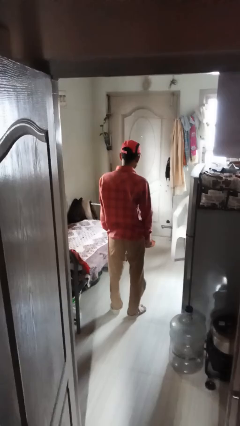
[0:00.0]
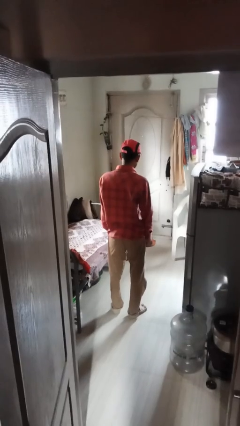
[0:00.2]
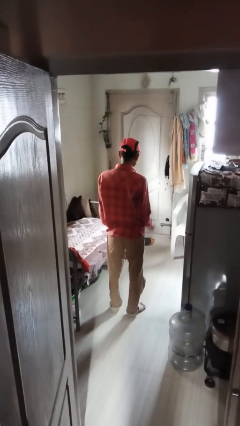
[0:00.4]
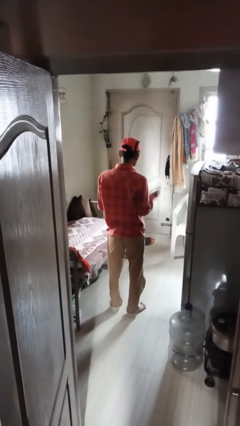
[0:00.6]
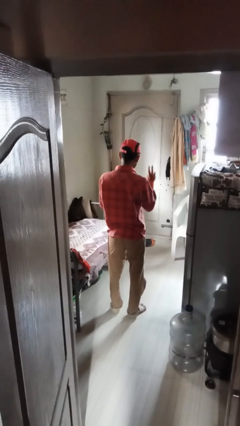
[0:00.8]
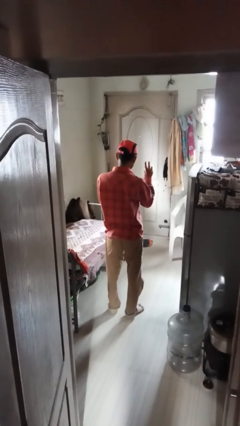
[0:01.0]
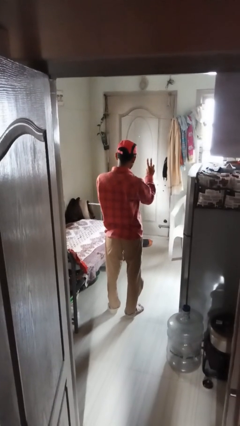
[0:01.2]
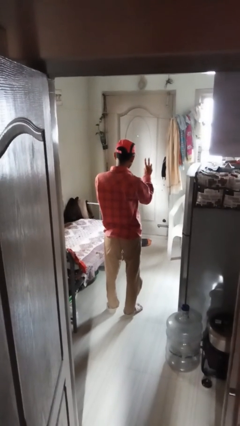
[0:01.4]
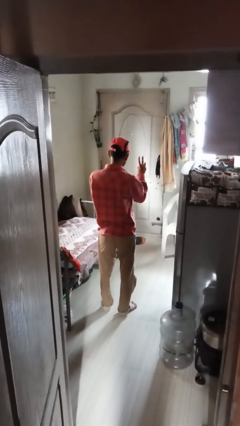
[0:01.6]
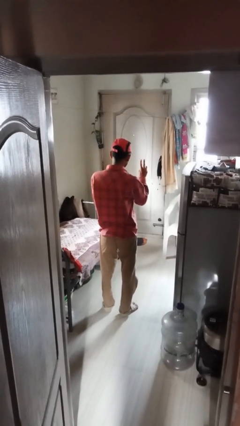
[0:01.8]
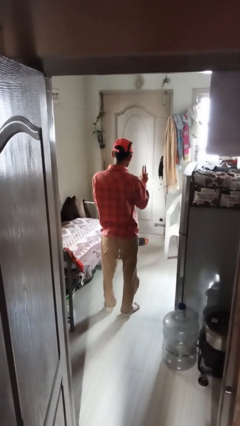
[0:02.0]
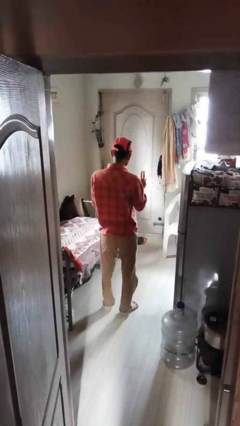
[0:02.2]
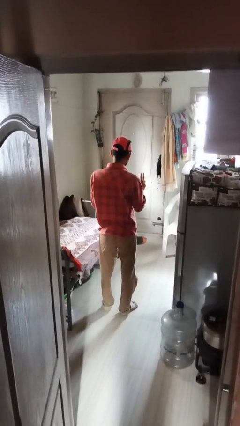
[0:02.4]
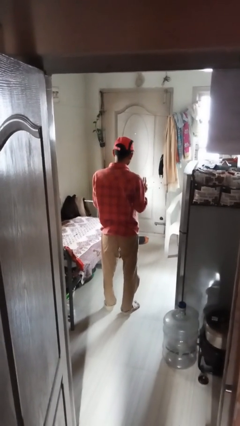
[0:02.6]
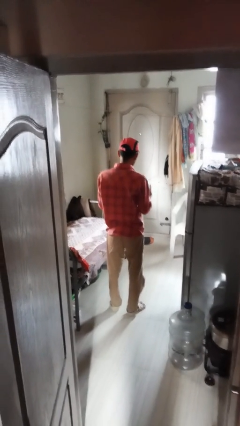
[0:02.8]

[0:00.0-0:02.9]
person gestures peace

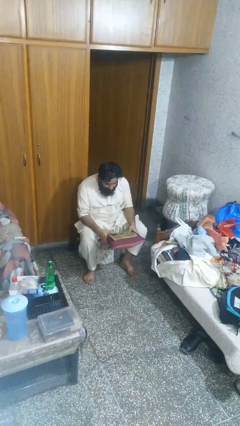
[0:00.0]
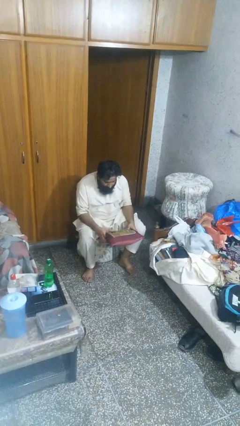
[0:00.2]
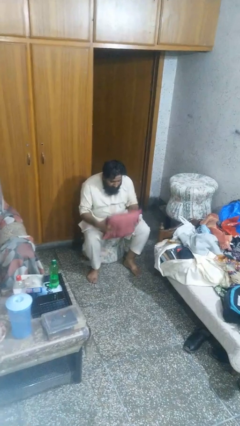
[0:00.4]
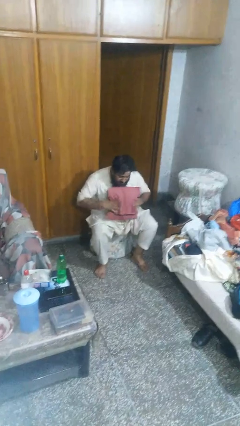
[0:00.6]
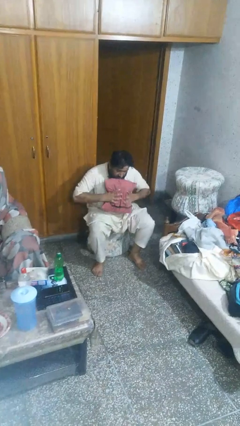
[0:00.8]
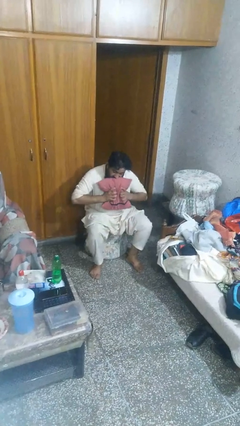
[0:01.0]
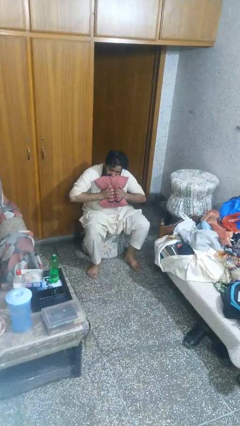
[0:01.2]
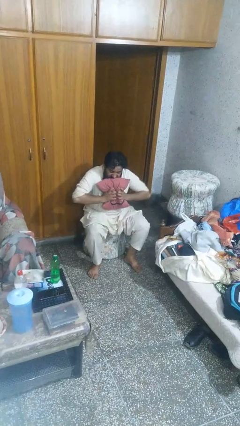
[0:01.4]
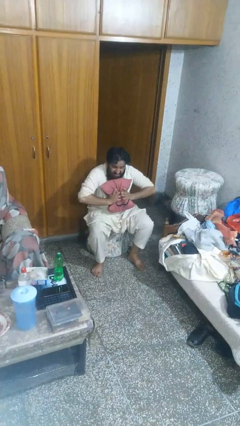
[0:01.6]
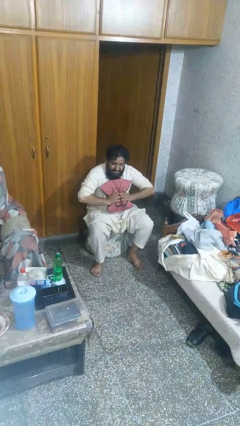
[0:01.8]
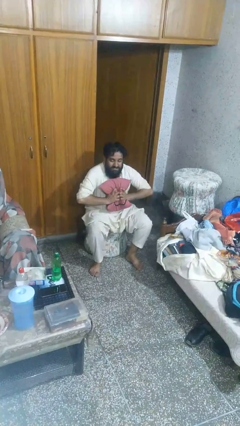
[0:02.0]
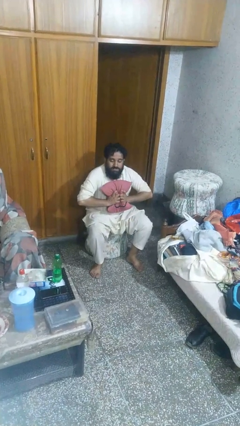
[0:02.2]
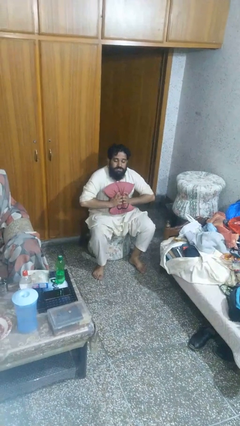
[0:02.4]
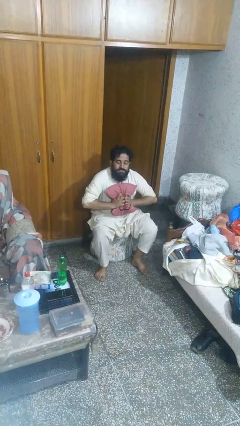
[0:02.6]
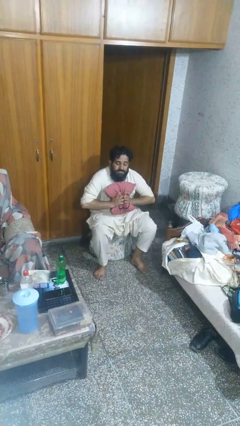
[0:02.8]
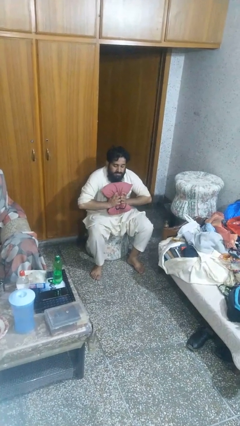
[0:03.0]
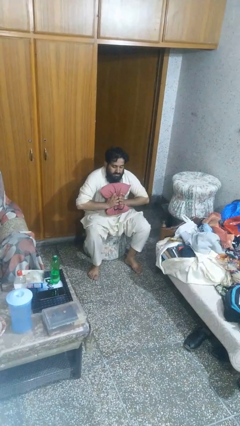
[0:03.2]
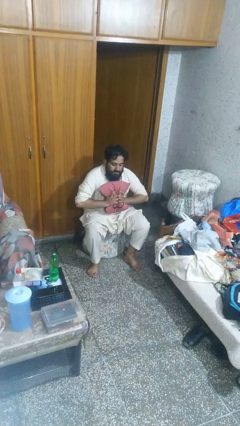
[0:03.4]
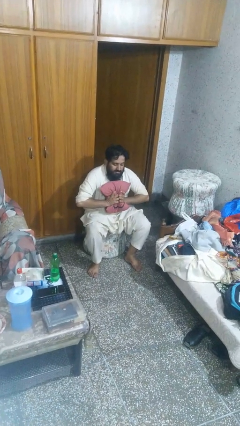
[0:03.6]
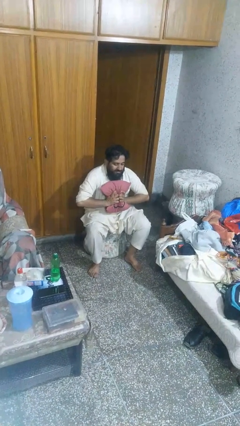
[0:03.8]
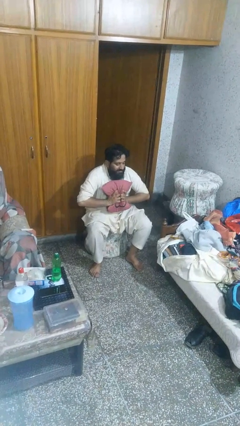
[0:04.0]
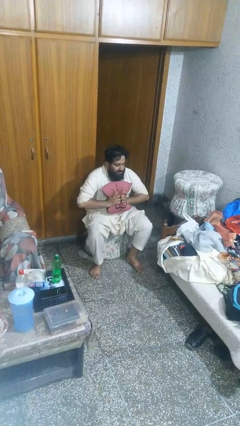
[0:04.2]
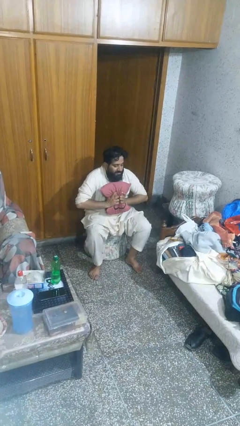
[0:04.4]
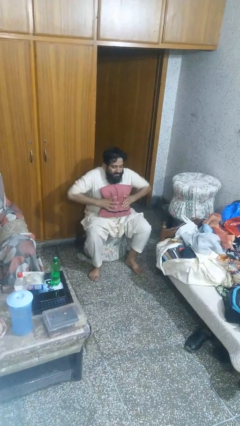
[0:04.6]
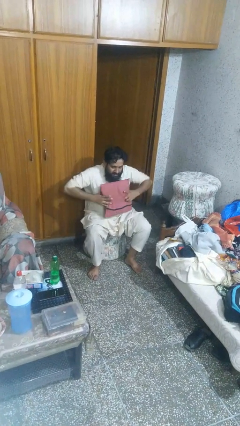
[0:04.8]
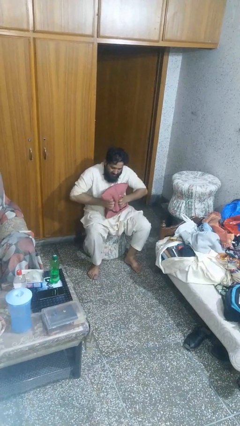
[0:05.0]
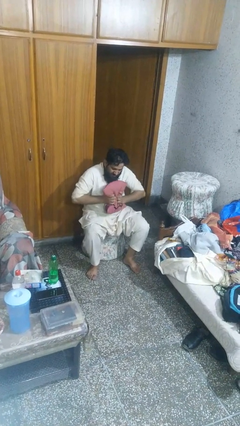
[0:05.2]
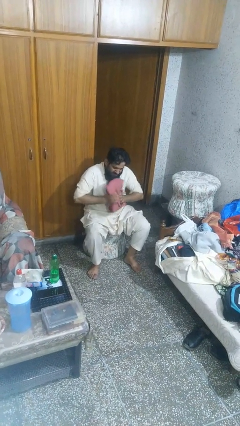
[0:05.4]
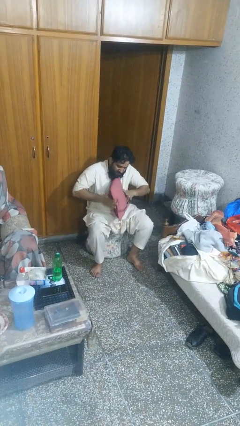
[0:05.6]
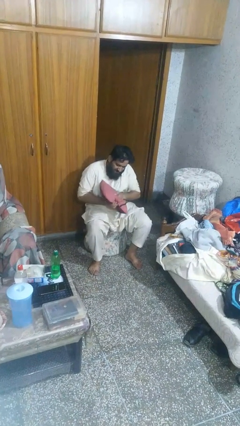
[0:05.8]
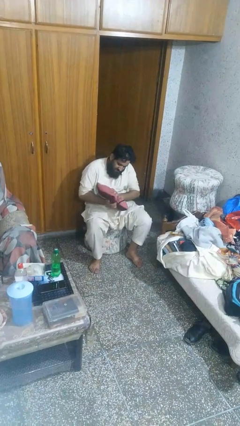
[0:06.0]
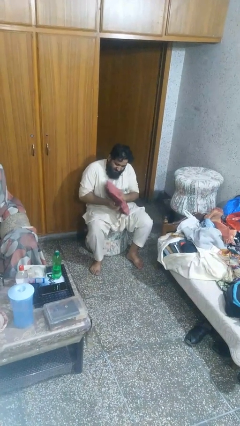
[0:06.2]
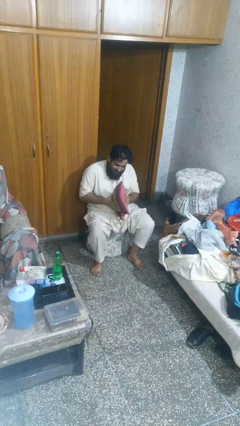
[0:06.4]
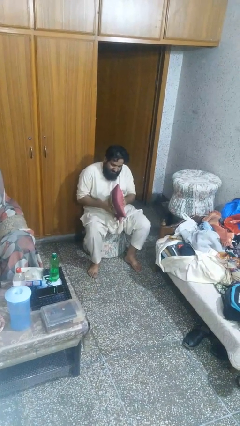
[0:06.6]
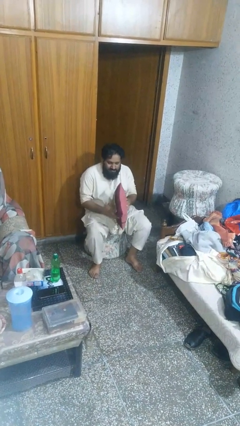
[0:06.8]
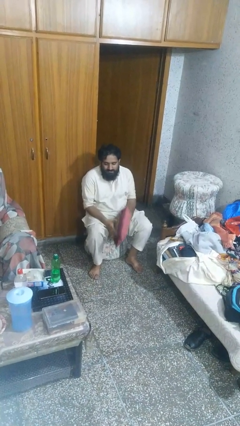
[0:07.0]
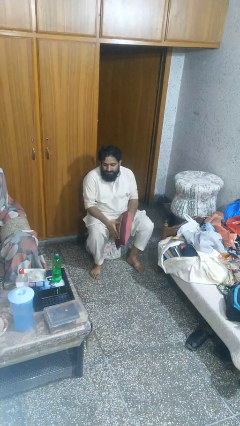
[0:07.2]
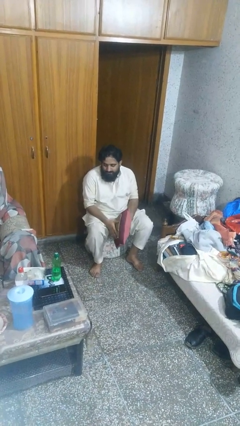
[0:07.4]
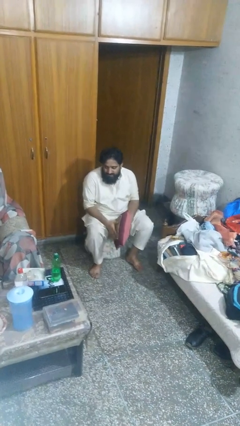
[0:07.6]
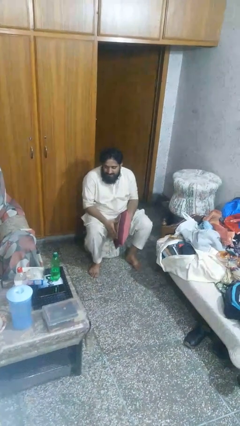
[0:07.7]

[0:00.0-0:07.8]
person squeezes object

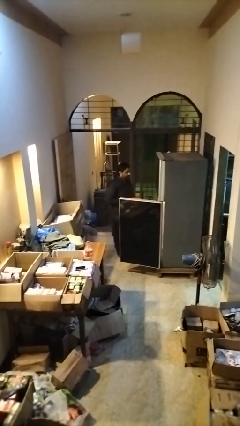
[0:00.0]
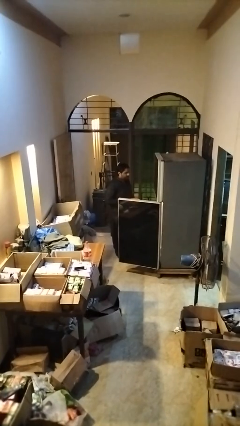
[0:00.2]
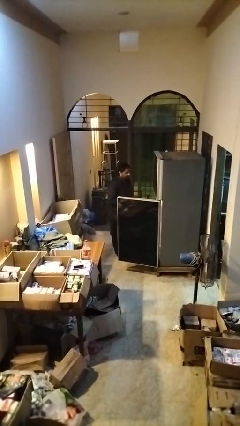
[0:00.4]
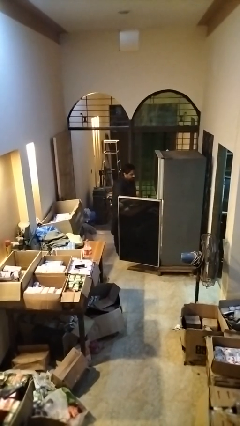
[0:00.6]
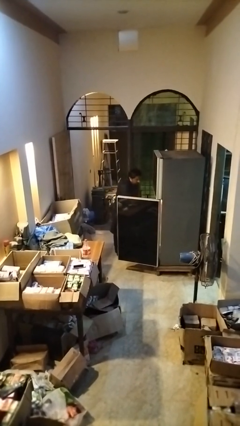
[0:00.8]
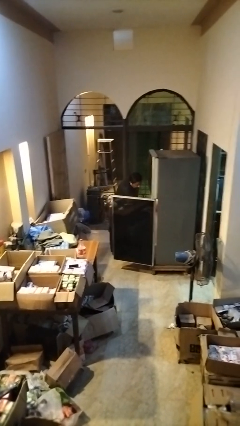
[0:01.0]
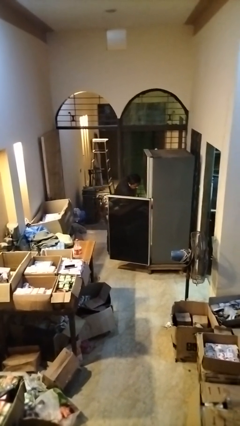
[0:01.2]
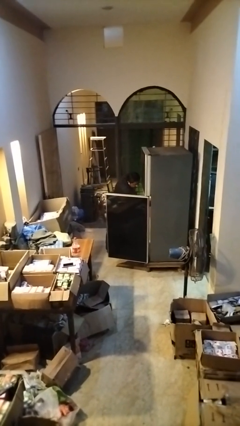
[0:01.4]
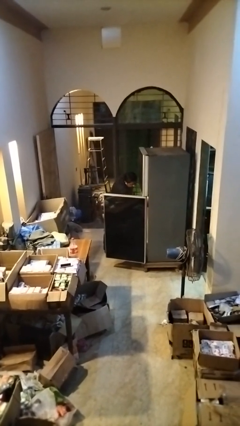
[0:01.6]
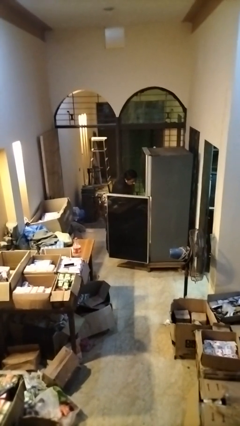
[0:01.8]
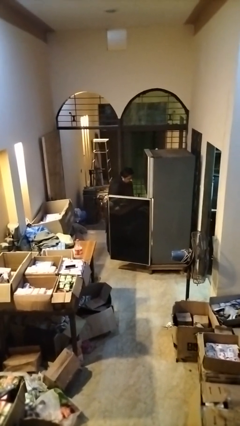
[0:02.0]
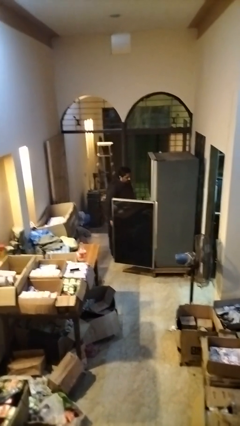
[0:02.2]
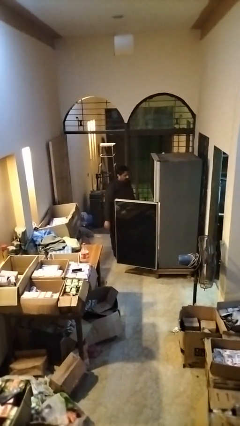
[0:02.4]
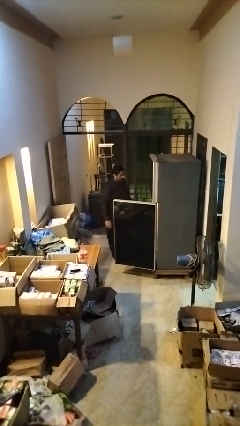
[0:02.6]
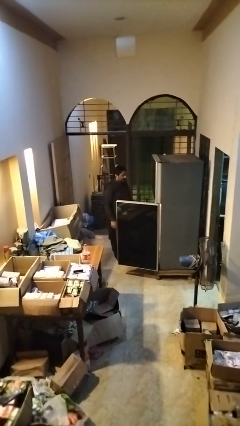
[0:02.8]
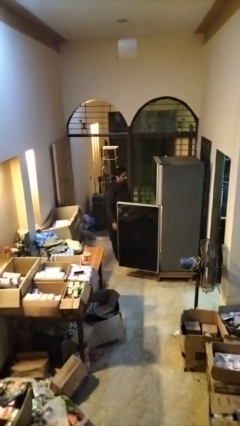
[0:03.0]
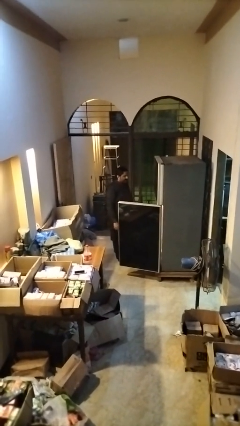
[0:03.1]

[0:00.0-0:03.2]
person takes object from refrigerator

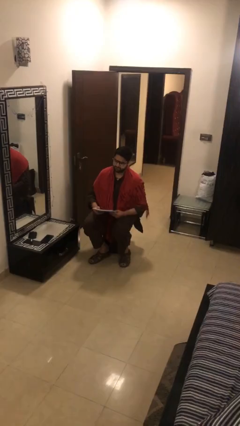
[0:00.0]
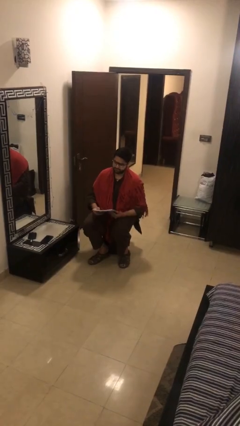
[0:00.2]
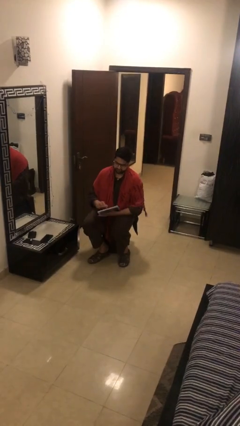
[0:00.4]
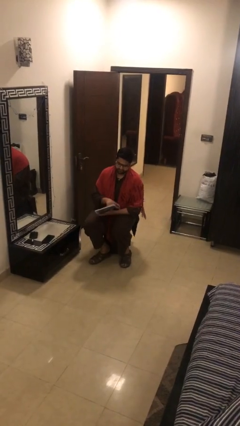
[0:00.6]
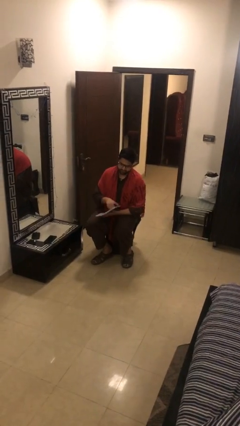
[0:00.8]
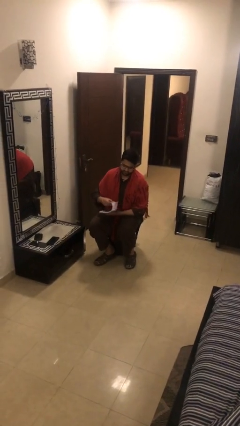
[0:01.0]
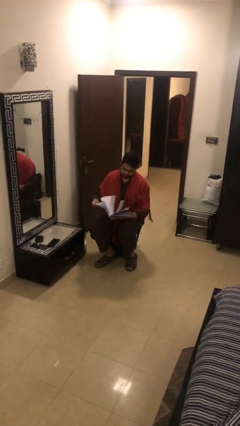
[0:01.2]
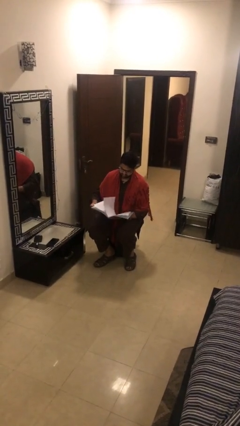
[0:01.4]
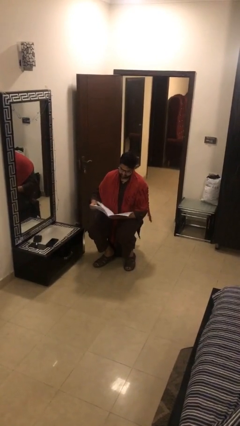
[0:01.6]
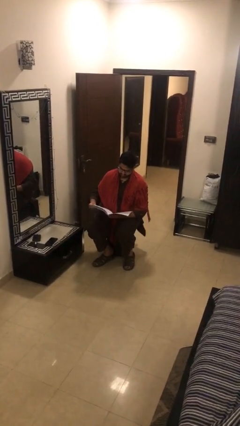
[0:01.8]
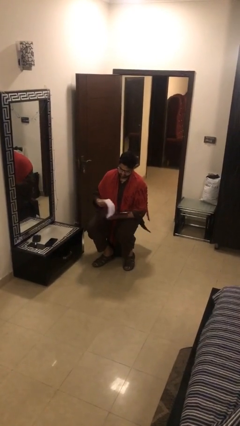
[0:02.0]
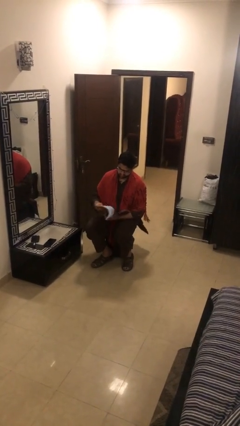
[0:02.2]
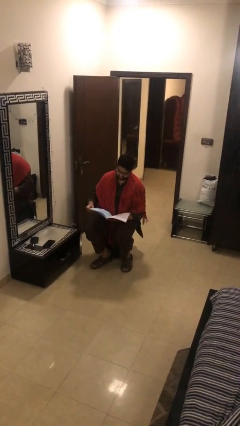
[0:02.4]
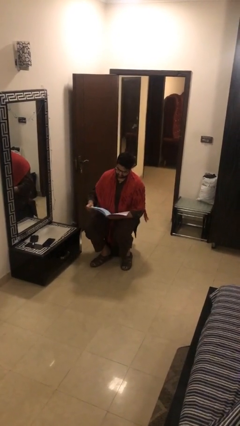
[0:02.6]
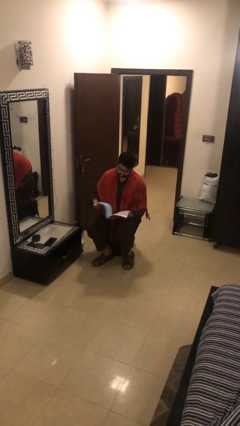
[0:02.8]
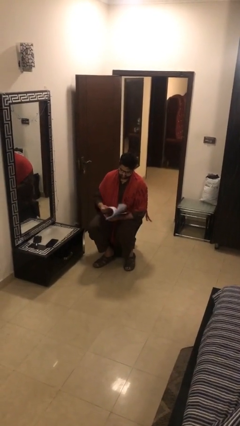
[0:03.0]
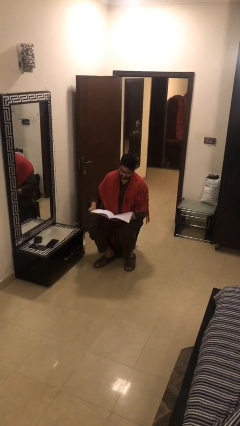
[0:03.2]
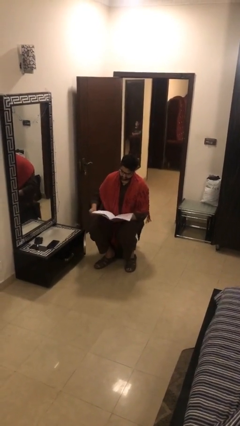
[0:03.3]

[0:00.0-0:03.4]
person reads document

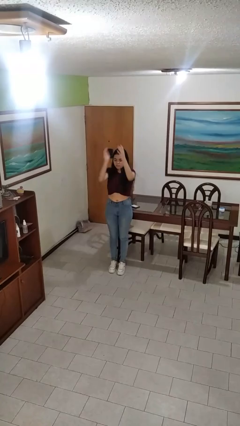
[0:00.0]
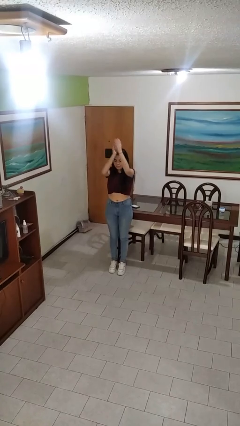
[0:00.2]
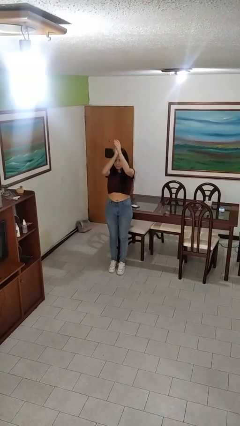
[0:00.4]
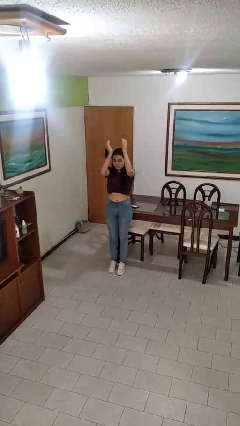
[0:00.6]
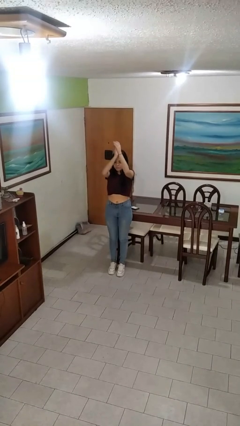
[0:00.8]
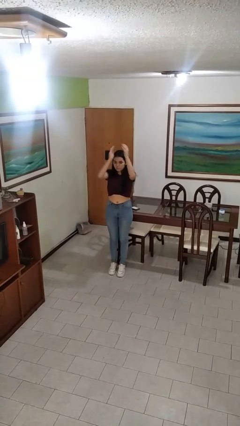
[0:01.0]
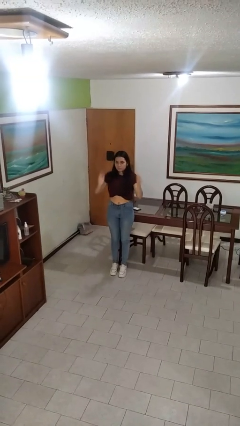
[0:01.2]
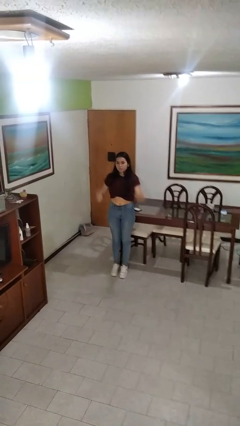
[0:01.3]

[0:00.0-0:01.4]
person claps hands
